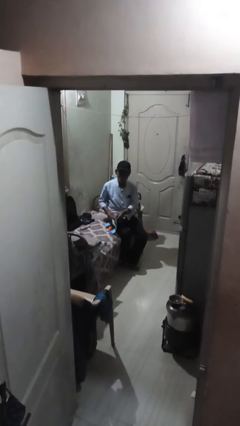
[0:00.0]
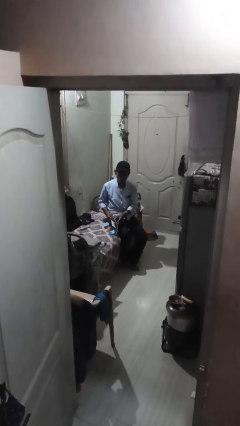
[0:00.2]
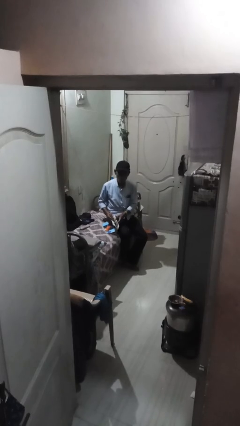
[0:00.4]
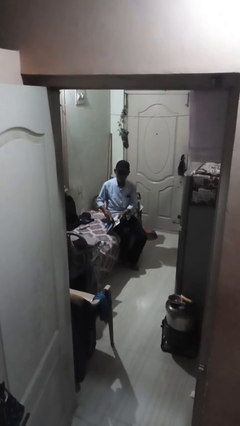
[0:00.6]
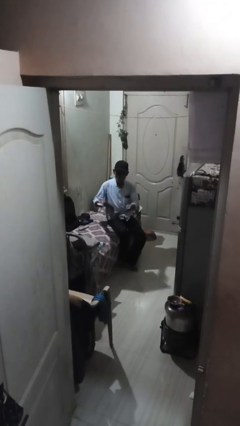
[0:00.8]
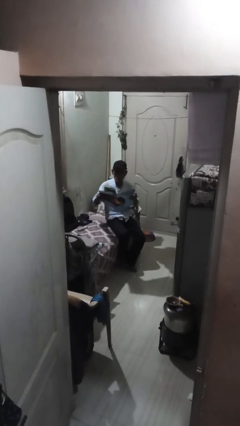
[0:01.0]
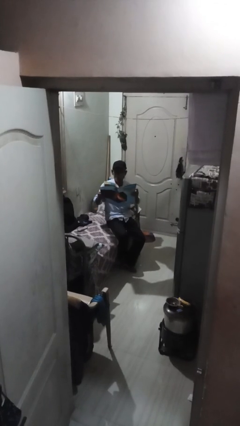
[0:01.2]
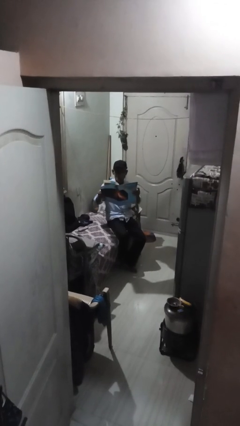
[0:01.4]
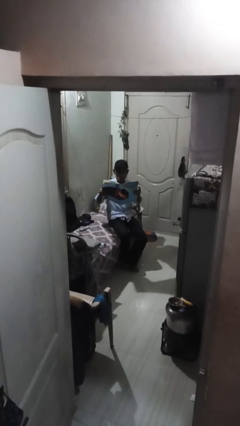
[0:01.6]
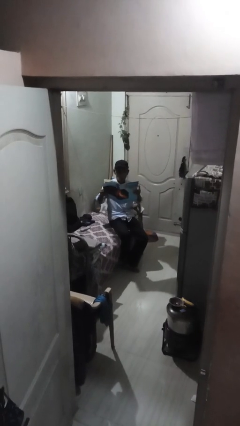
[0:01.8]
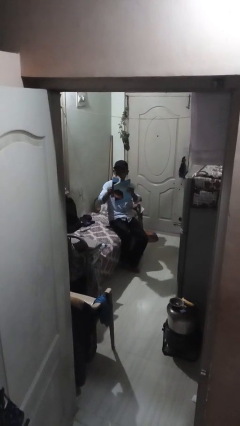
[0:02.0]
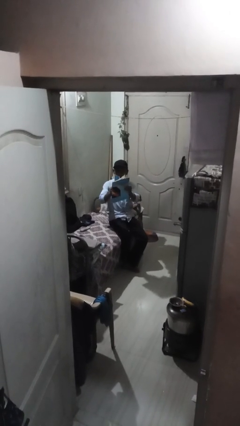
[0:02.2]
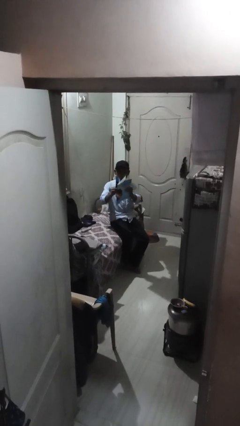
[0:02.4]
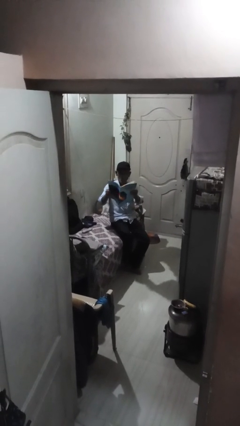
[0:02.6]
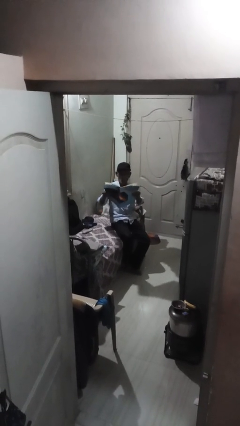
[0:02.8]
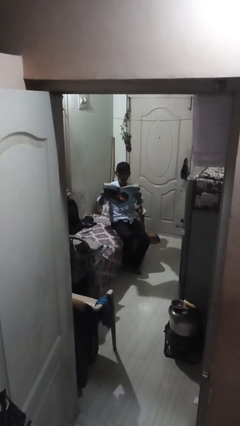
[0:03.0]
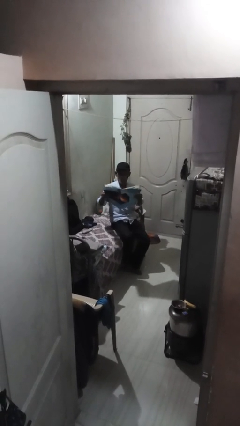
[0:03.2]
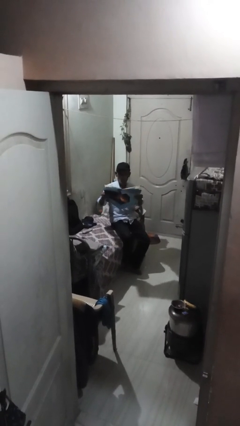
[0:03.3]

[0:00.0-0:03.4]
person reads magazine

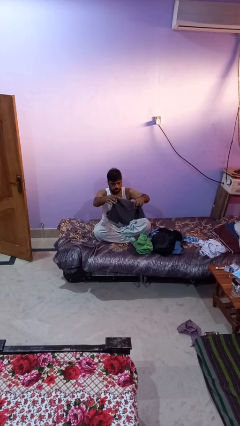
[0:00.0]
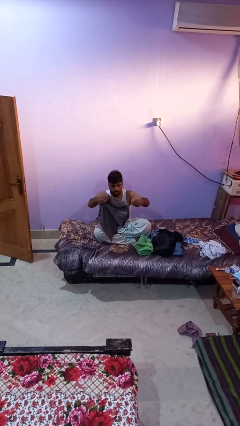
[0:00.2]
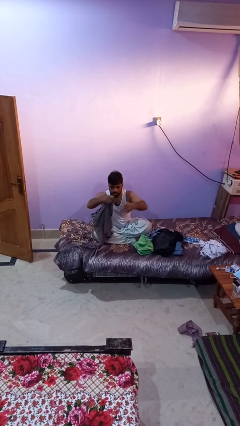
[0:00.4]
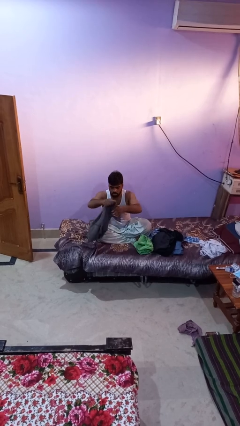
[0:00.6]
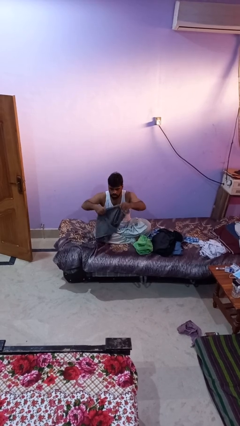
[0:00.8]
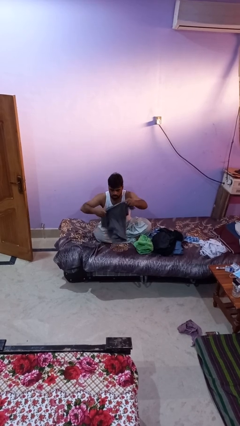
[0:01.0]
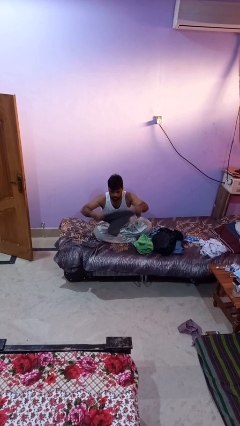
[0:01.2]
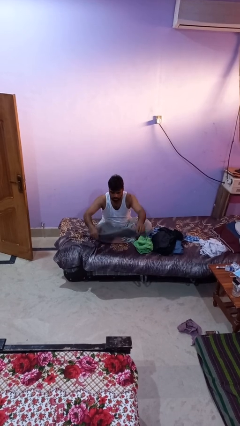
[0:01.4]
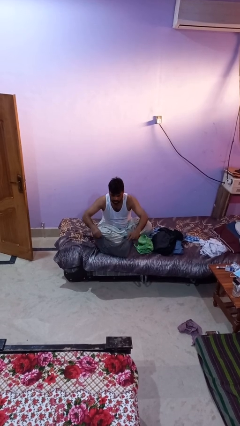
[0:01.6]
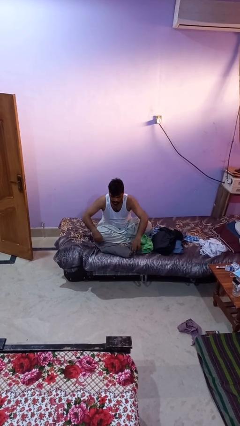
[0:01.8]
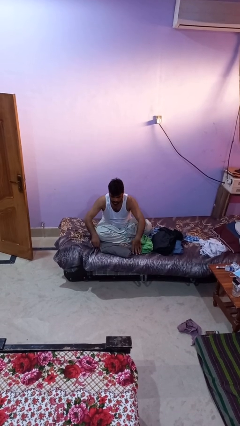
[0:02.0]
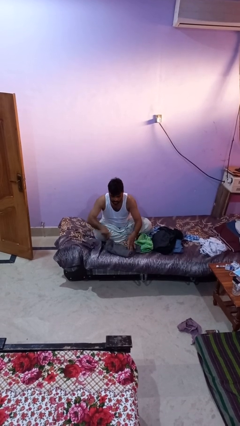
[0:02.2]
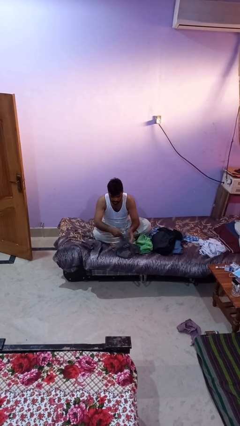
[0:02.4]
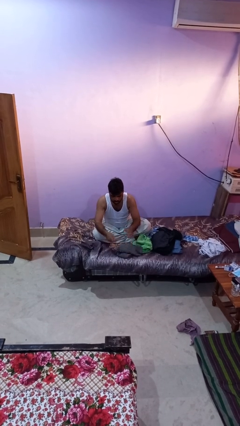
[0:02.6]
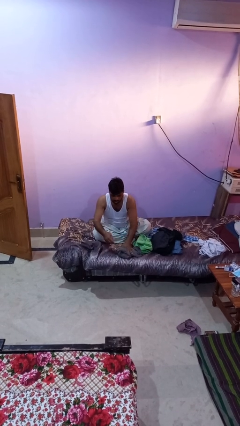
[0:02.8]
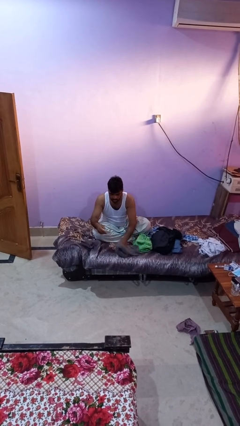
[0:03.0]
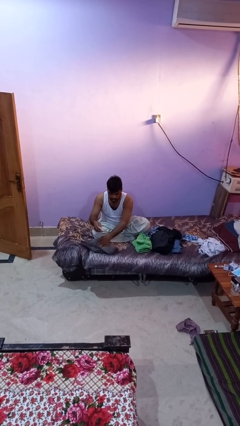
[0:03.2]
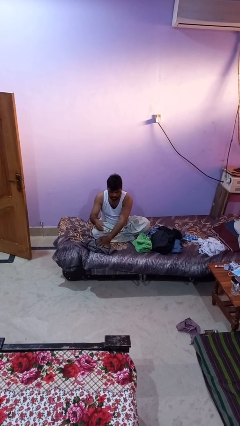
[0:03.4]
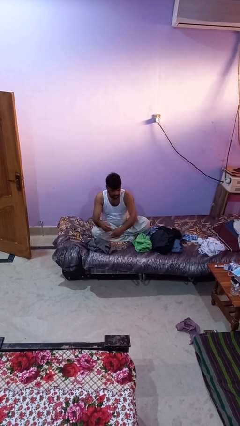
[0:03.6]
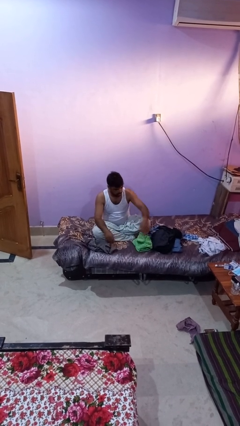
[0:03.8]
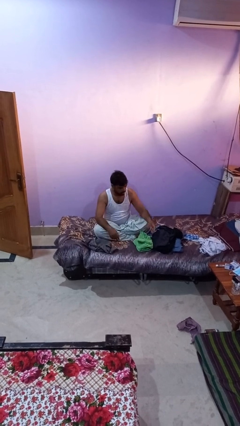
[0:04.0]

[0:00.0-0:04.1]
person folds shirt

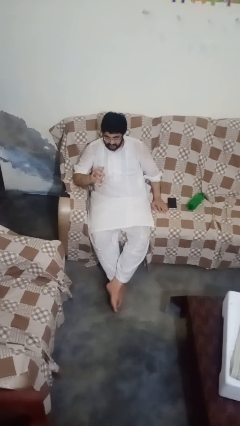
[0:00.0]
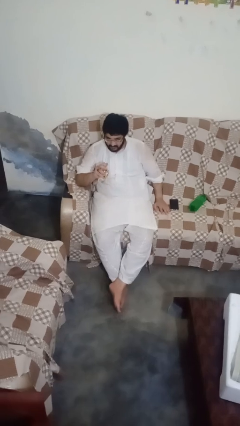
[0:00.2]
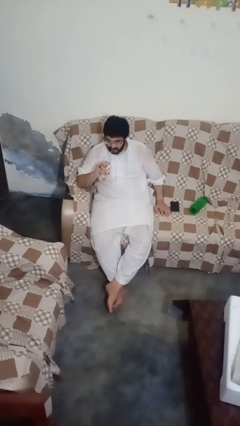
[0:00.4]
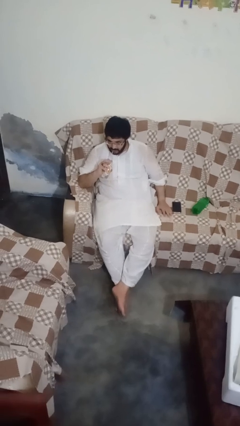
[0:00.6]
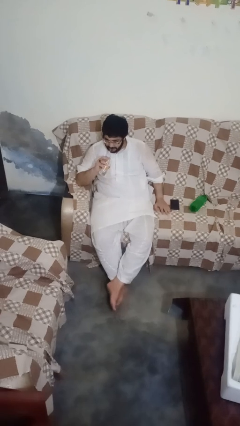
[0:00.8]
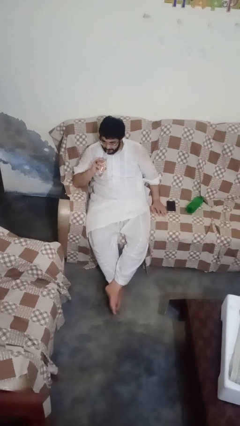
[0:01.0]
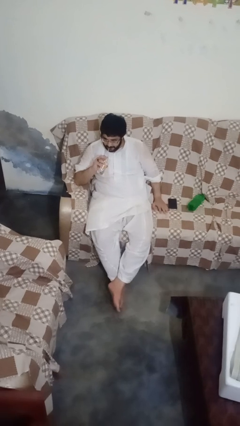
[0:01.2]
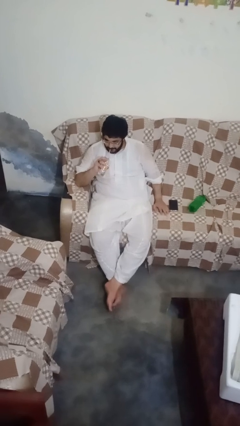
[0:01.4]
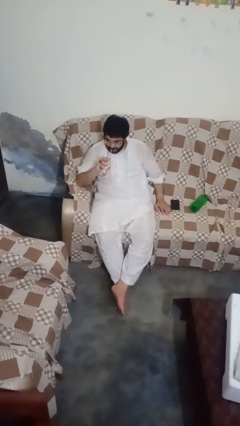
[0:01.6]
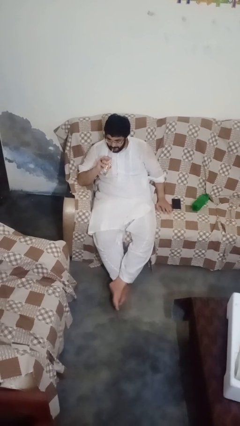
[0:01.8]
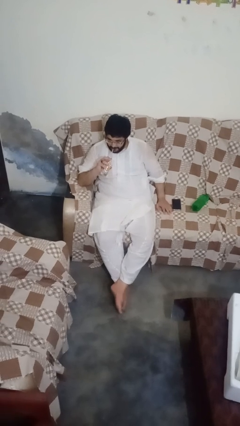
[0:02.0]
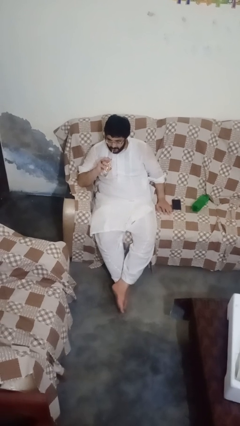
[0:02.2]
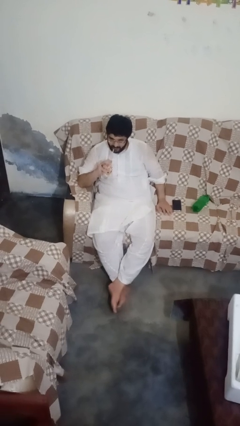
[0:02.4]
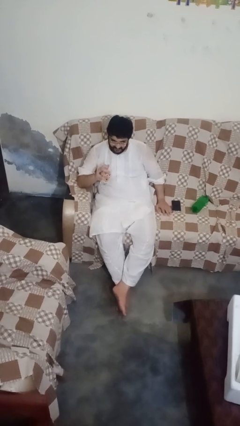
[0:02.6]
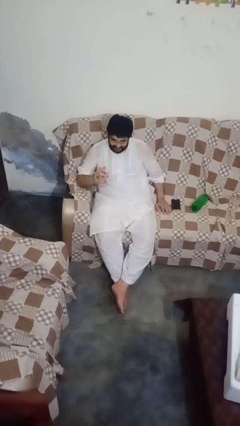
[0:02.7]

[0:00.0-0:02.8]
person drinks from straw

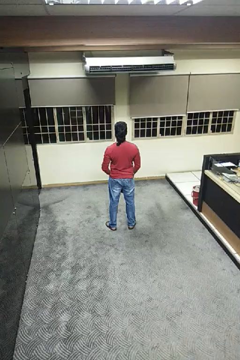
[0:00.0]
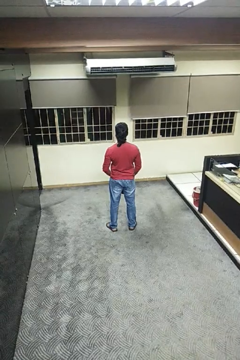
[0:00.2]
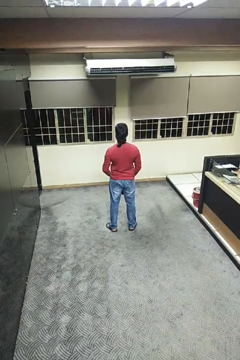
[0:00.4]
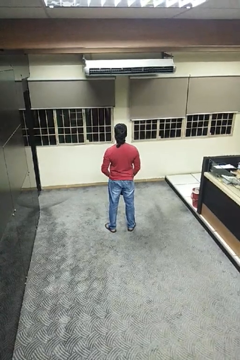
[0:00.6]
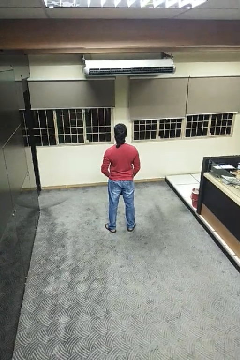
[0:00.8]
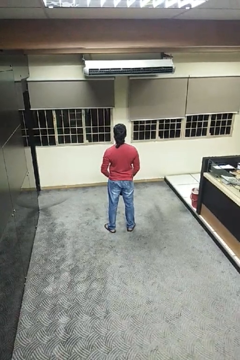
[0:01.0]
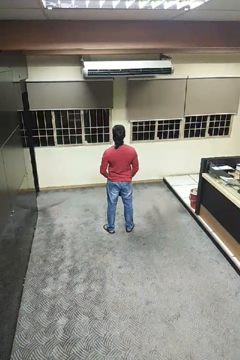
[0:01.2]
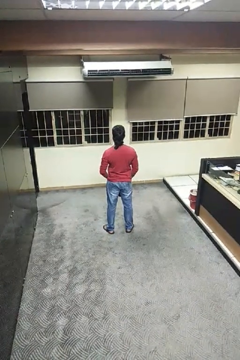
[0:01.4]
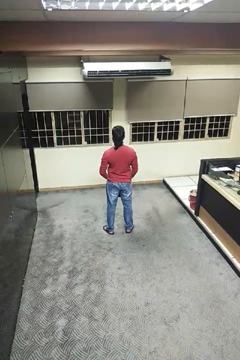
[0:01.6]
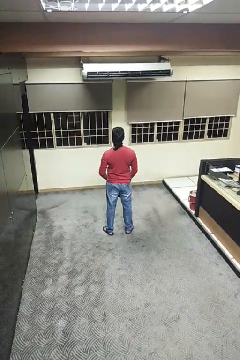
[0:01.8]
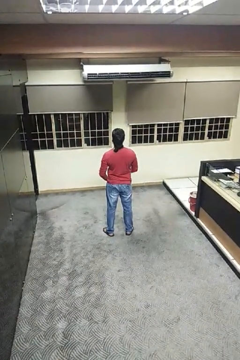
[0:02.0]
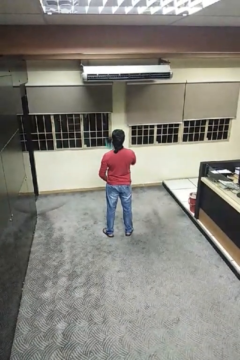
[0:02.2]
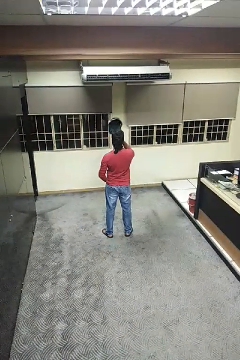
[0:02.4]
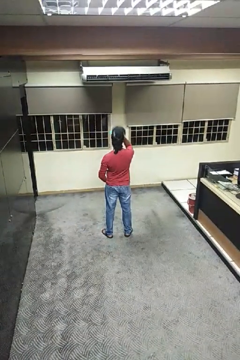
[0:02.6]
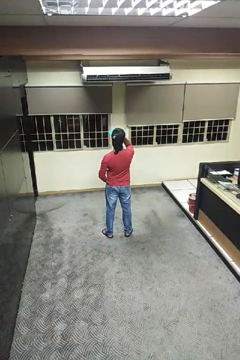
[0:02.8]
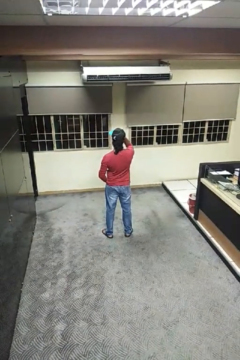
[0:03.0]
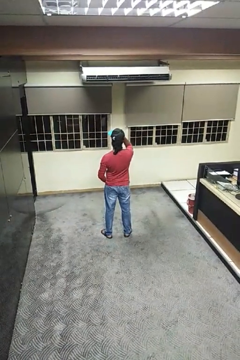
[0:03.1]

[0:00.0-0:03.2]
person puts on hat

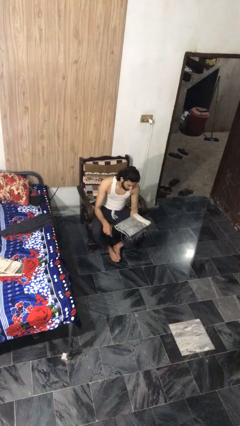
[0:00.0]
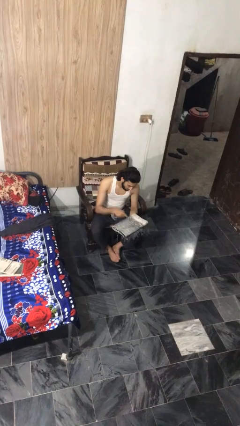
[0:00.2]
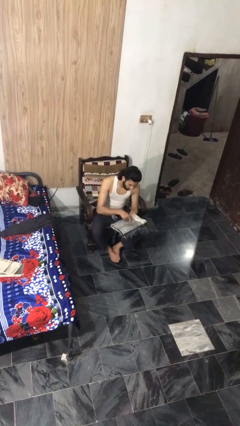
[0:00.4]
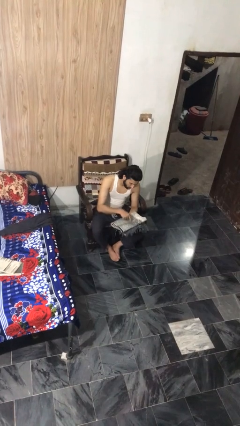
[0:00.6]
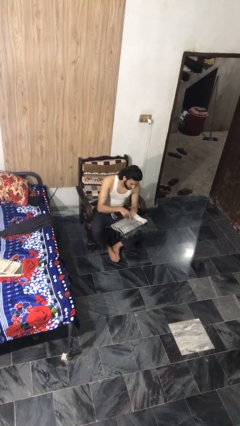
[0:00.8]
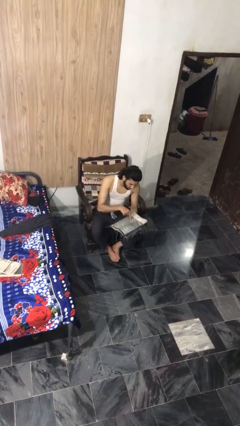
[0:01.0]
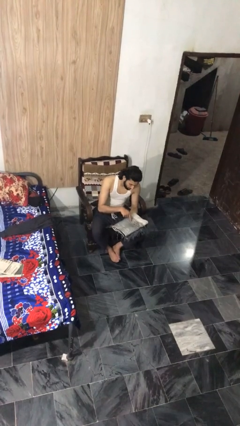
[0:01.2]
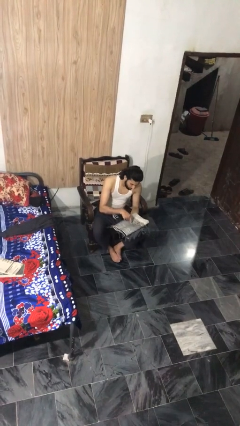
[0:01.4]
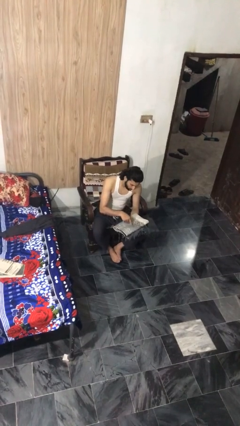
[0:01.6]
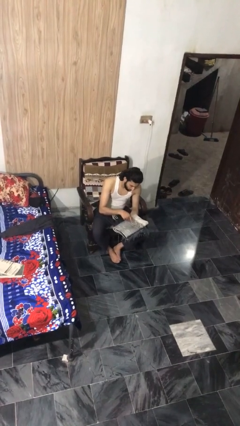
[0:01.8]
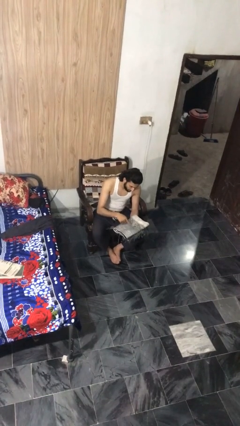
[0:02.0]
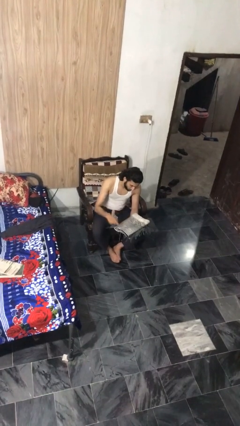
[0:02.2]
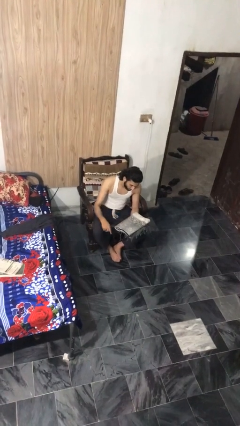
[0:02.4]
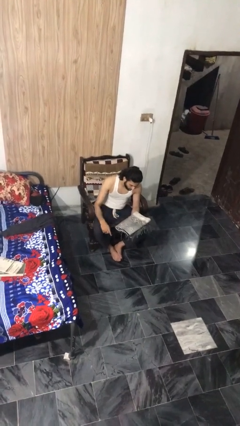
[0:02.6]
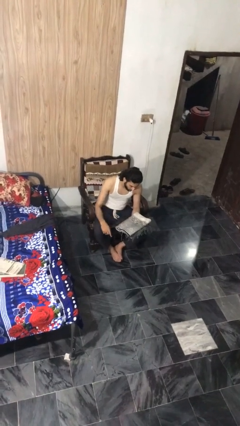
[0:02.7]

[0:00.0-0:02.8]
person taps object with finger

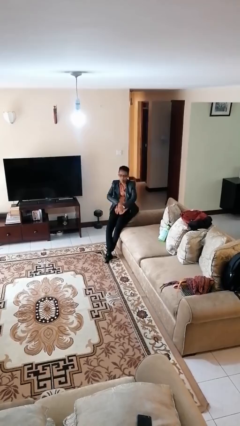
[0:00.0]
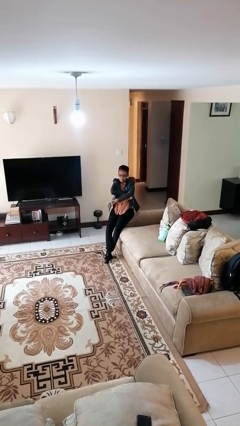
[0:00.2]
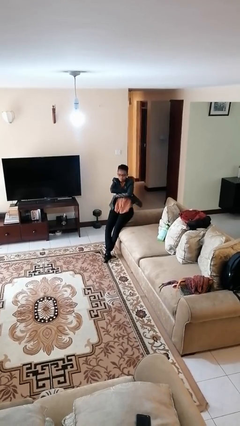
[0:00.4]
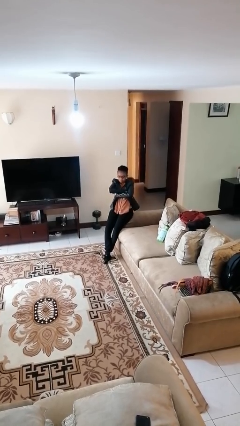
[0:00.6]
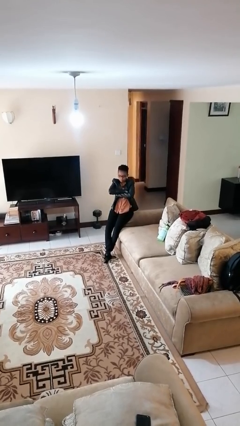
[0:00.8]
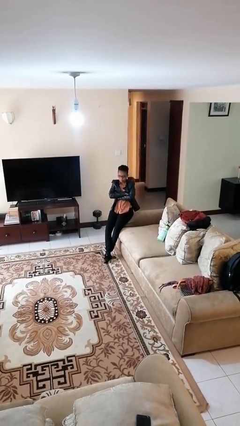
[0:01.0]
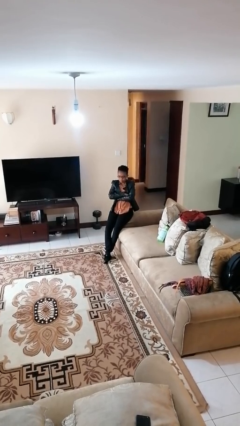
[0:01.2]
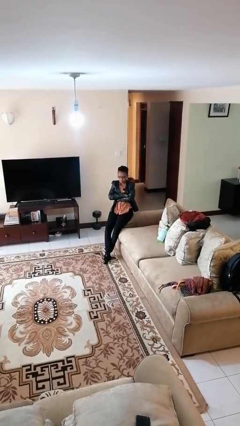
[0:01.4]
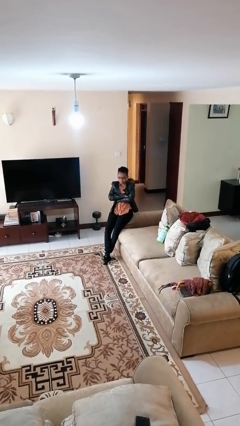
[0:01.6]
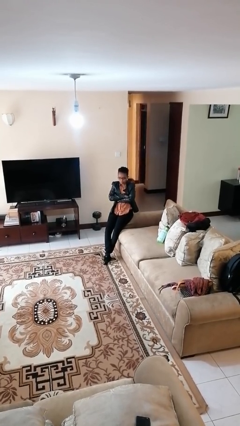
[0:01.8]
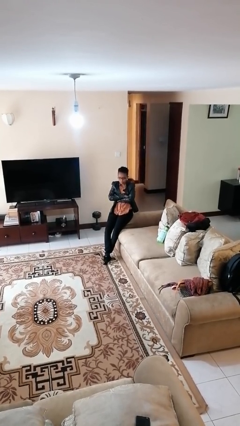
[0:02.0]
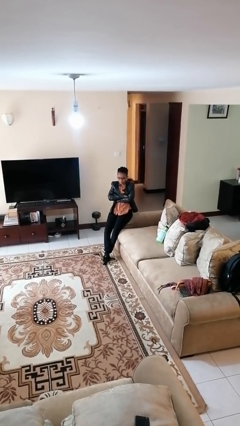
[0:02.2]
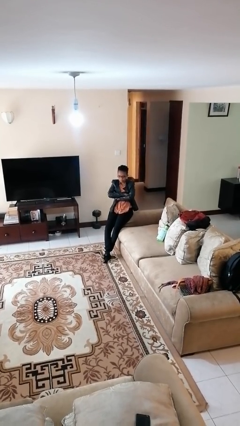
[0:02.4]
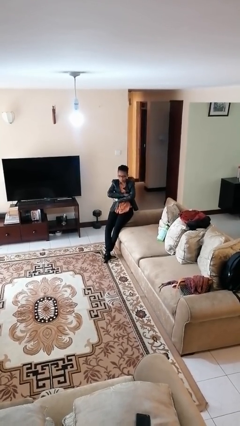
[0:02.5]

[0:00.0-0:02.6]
person crosses arms
